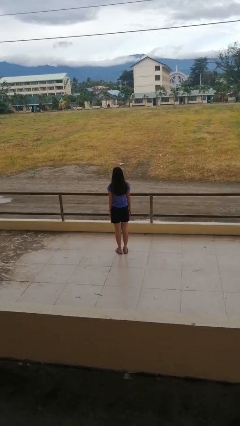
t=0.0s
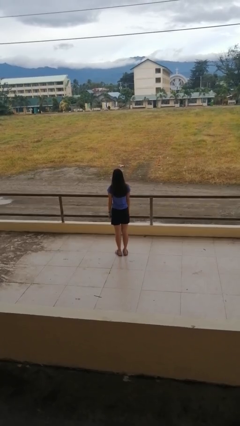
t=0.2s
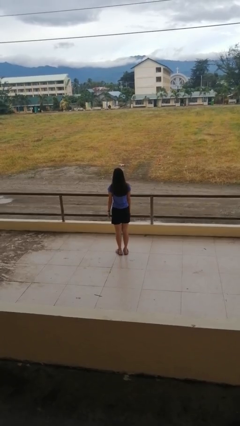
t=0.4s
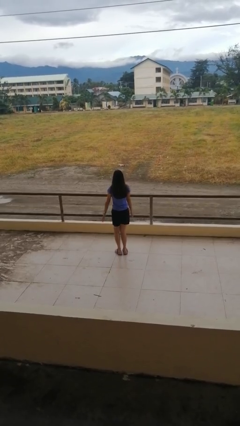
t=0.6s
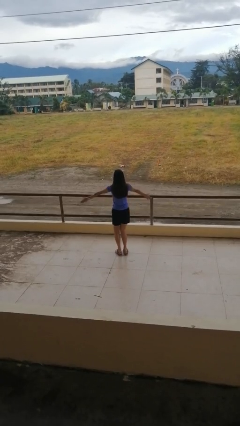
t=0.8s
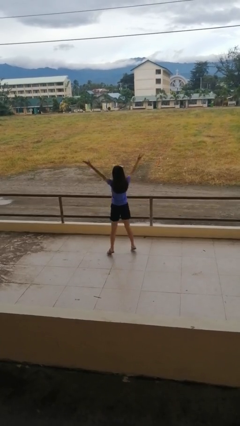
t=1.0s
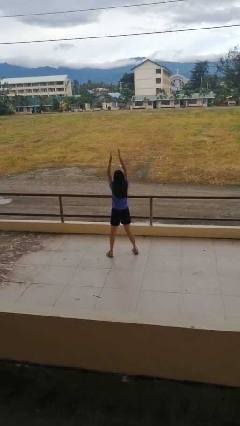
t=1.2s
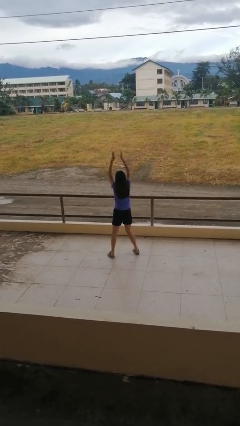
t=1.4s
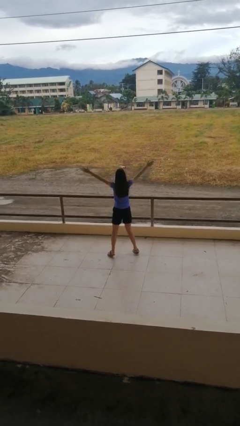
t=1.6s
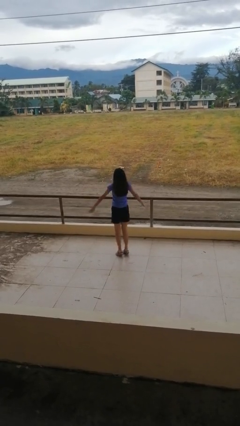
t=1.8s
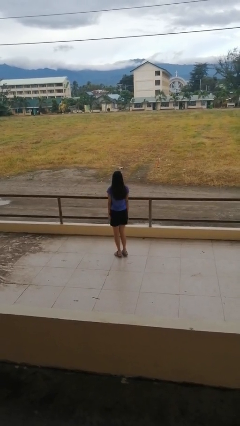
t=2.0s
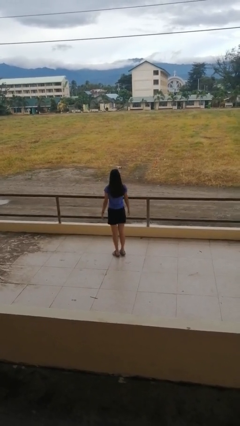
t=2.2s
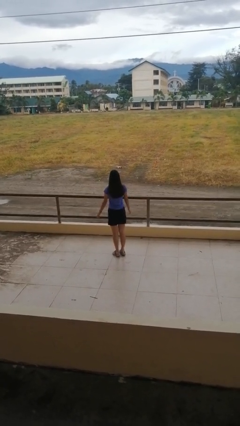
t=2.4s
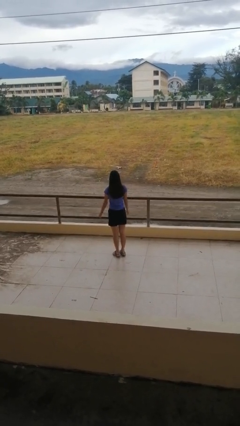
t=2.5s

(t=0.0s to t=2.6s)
person exercises with jumping jacks

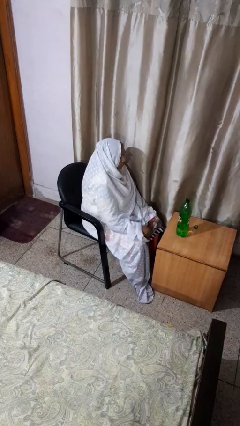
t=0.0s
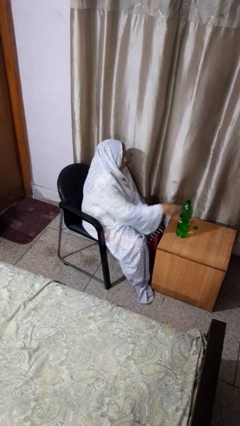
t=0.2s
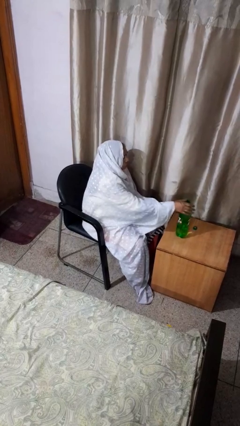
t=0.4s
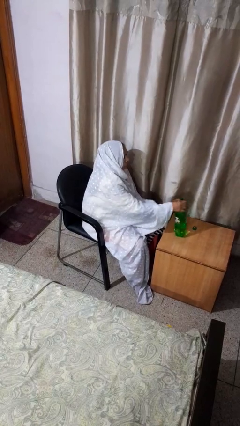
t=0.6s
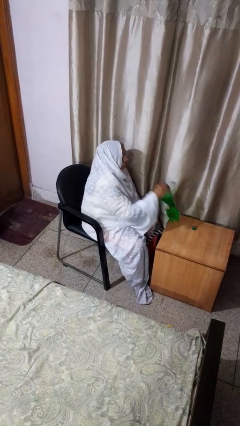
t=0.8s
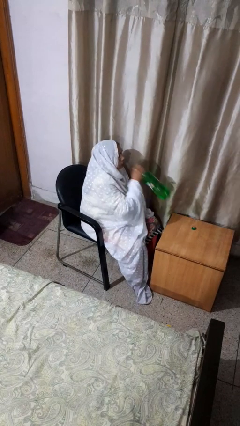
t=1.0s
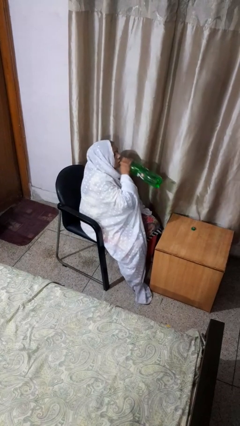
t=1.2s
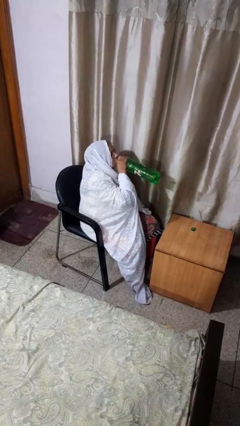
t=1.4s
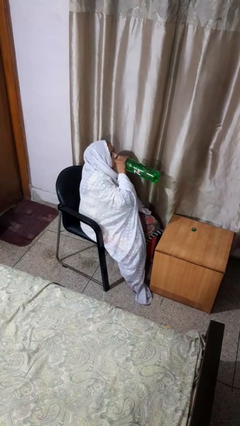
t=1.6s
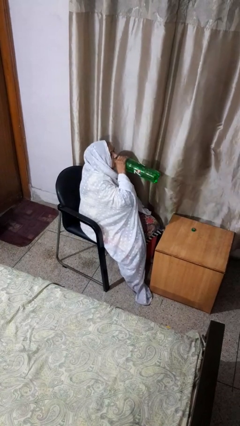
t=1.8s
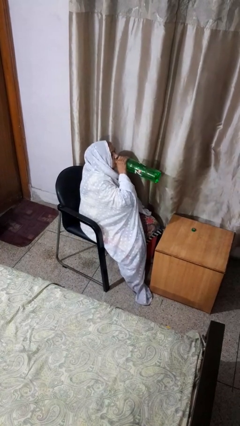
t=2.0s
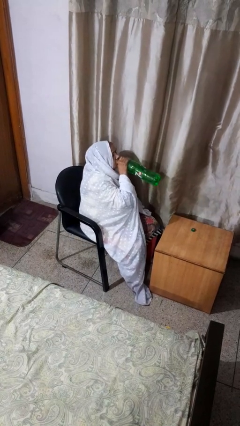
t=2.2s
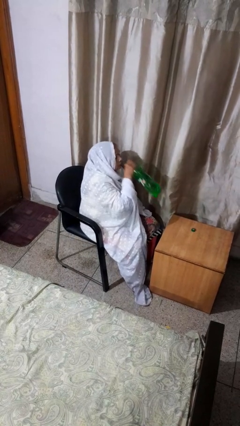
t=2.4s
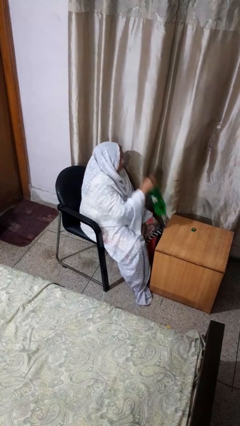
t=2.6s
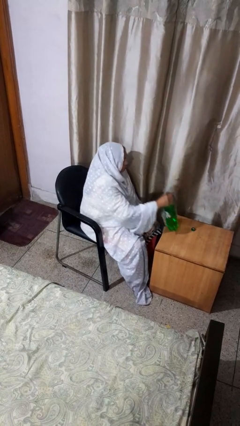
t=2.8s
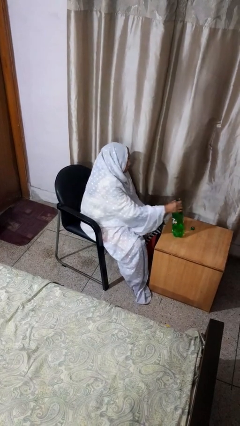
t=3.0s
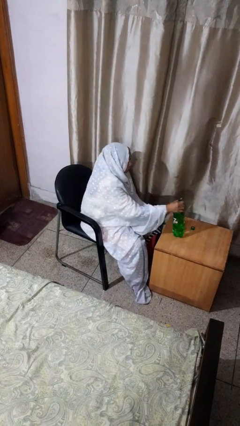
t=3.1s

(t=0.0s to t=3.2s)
person drinks from bottle

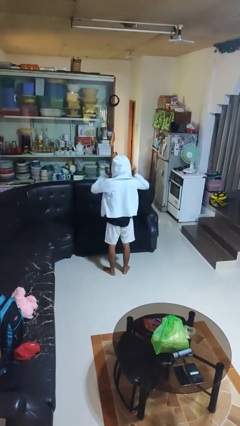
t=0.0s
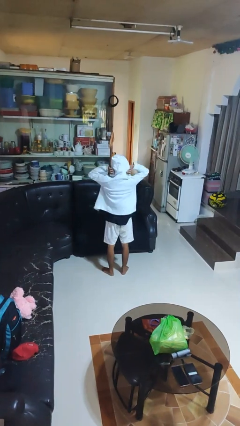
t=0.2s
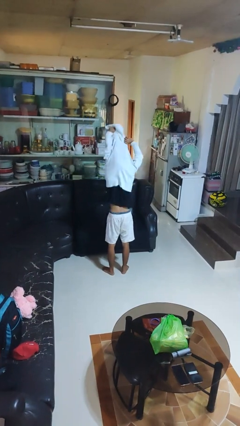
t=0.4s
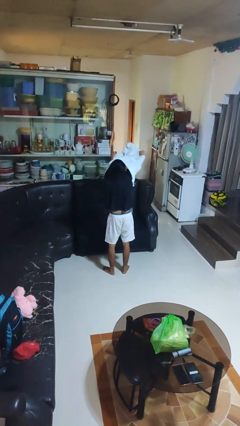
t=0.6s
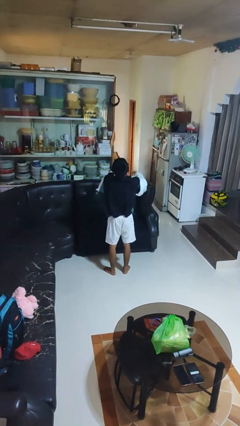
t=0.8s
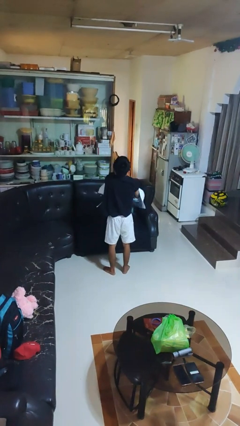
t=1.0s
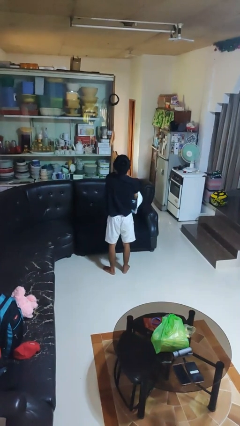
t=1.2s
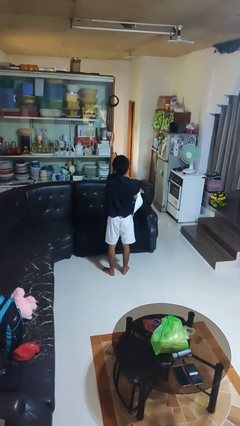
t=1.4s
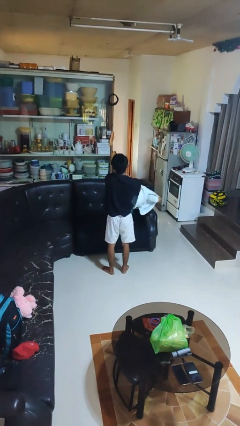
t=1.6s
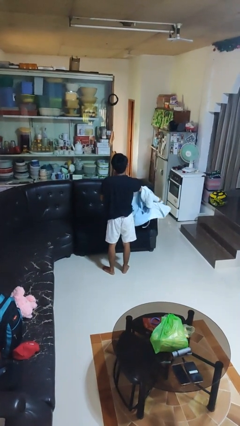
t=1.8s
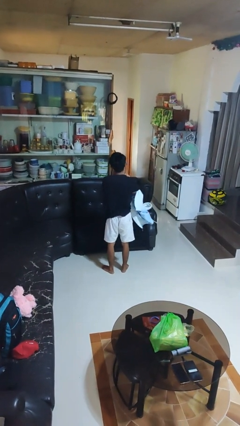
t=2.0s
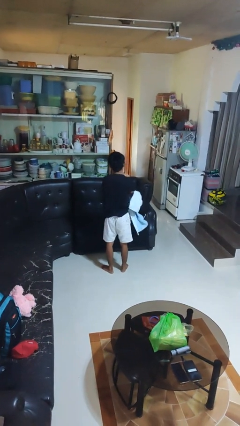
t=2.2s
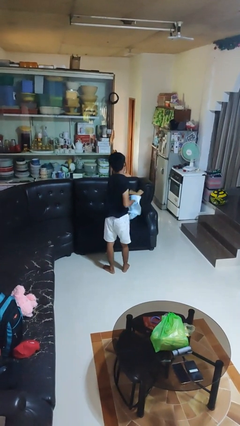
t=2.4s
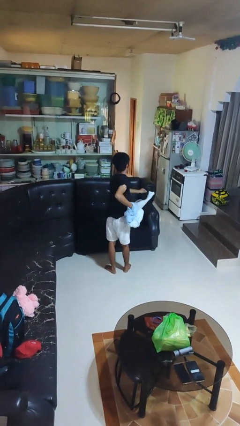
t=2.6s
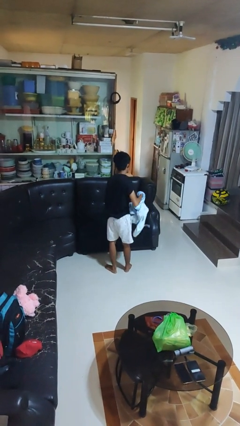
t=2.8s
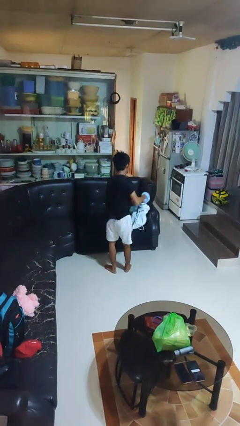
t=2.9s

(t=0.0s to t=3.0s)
person takes off hoodie

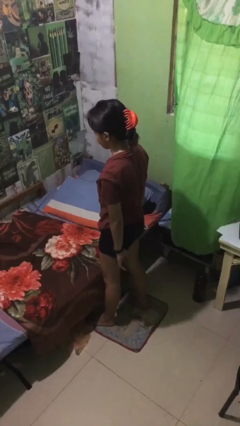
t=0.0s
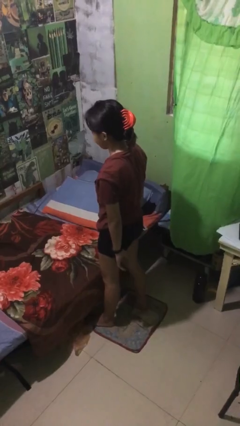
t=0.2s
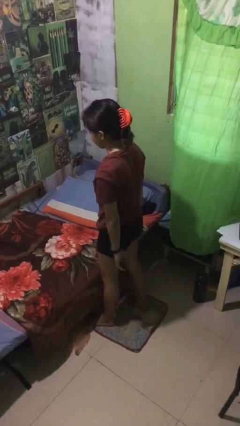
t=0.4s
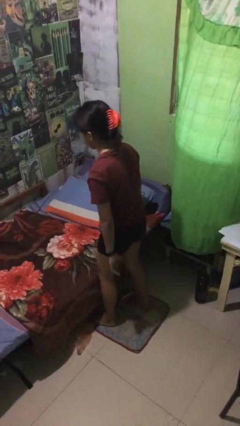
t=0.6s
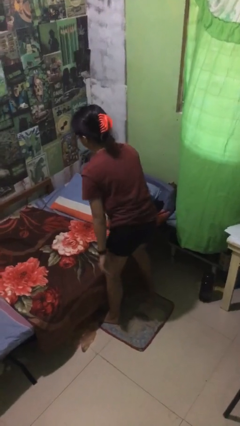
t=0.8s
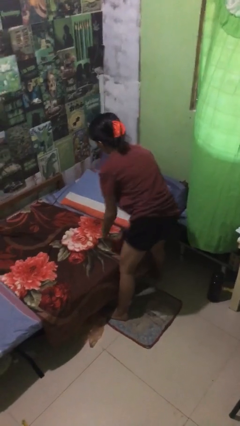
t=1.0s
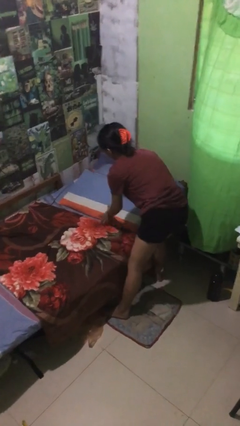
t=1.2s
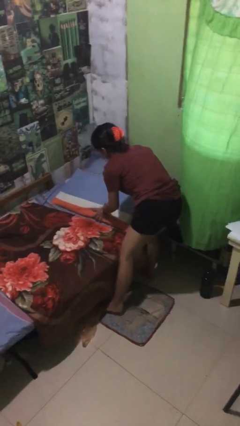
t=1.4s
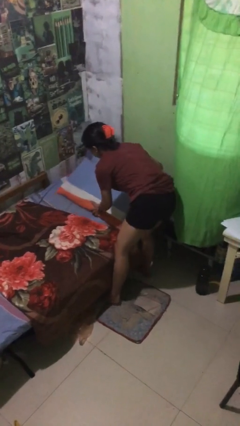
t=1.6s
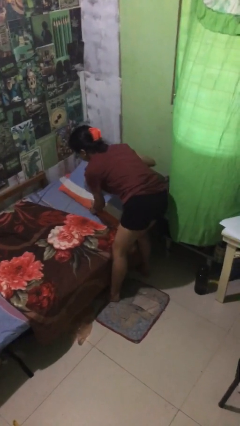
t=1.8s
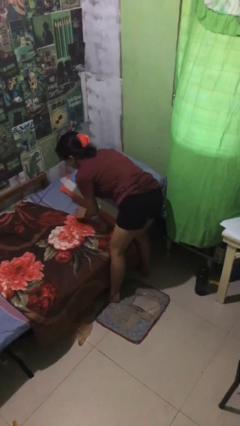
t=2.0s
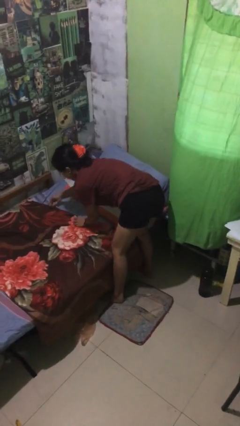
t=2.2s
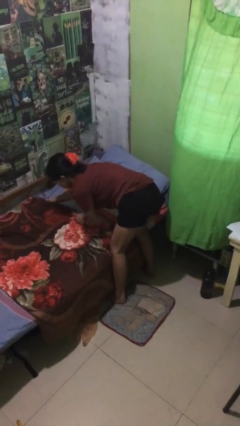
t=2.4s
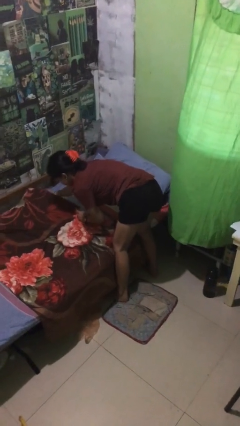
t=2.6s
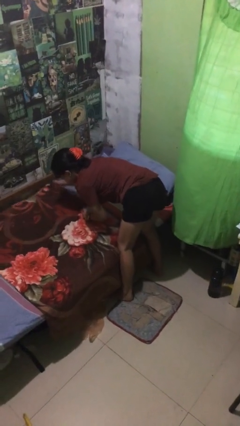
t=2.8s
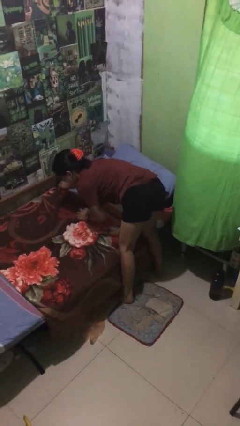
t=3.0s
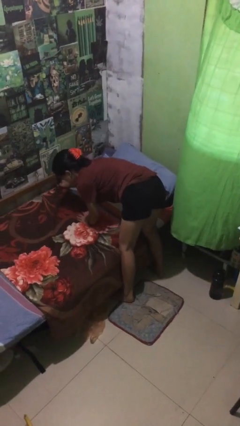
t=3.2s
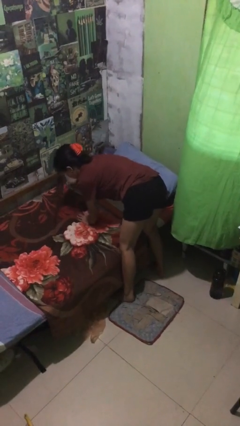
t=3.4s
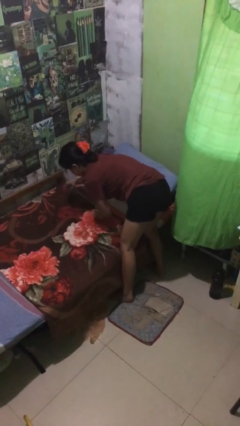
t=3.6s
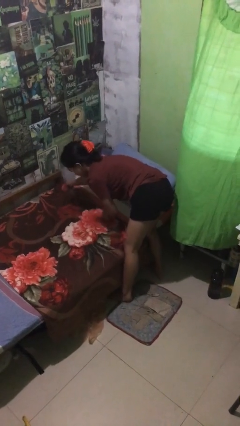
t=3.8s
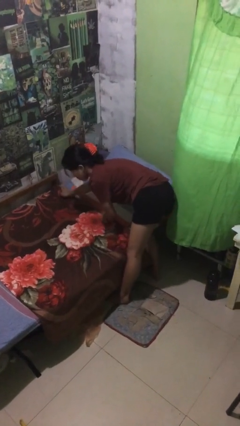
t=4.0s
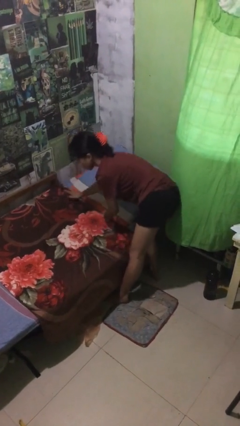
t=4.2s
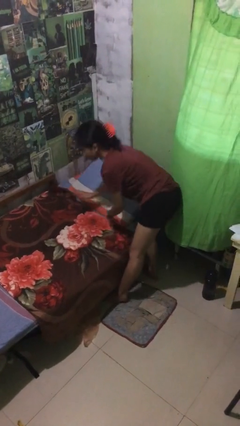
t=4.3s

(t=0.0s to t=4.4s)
person makes bed

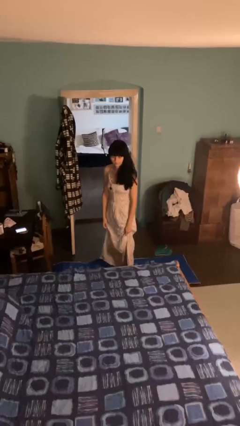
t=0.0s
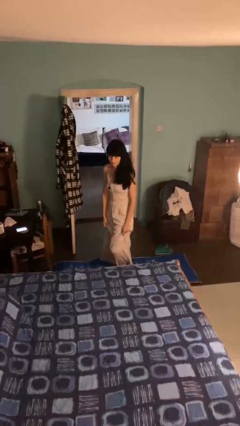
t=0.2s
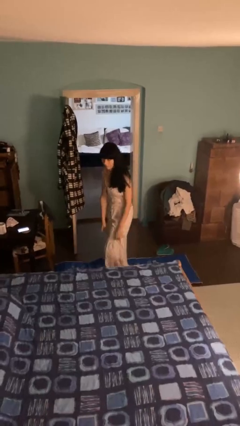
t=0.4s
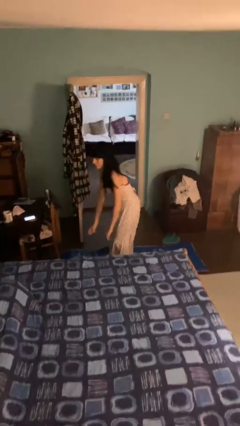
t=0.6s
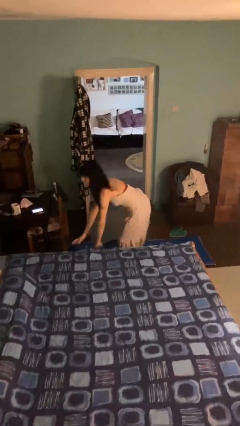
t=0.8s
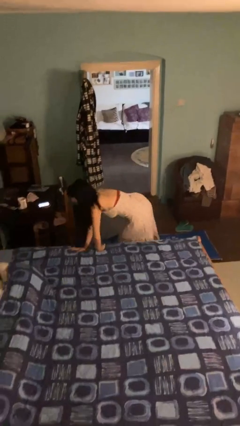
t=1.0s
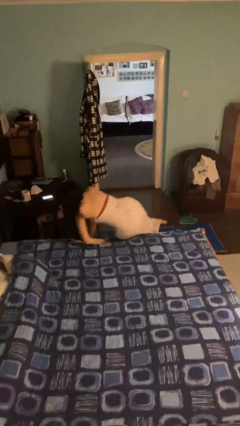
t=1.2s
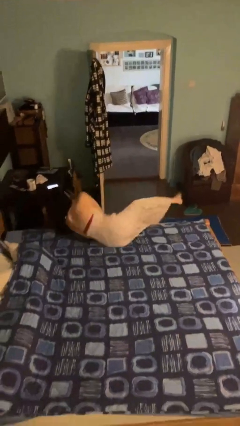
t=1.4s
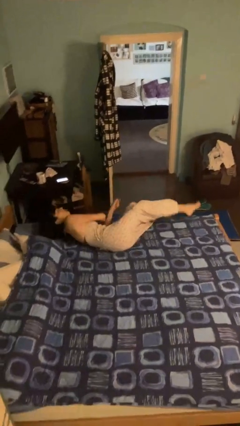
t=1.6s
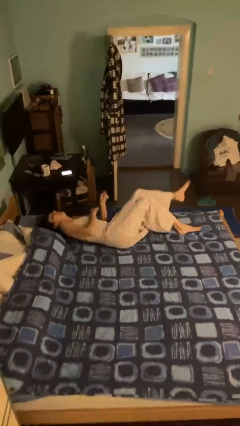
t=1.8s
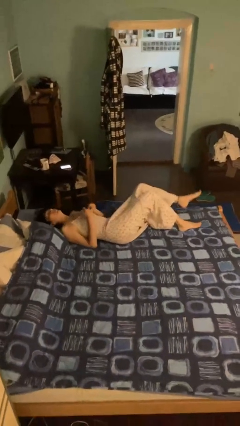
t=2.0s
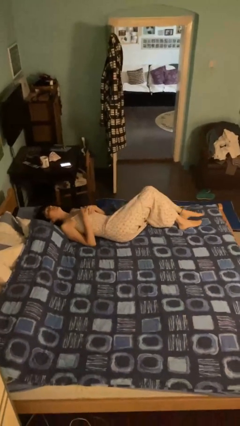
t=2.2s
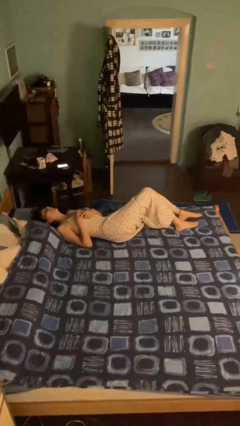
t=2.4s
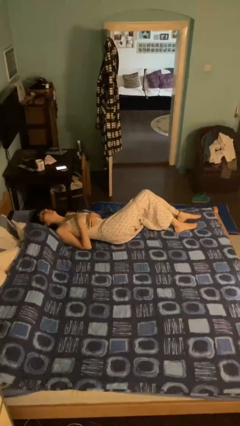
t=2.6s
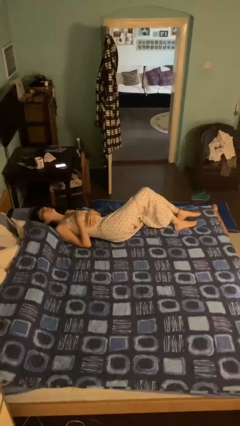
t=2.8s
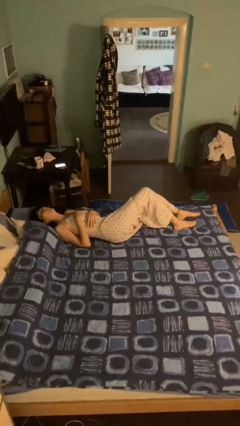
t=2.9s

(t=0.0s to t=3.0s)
person lies down on bed

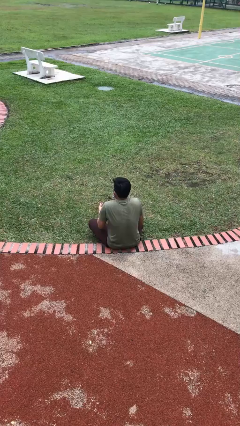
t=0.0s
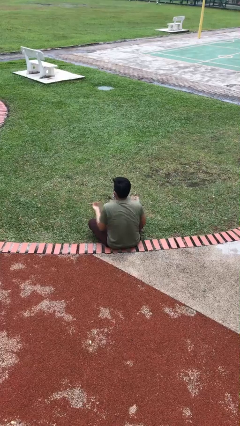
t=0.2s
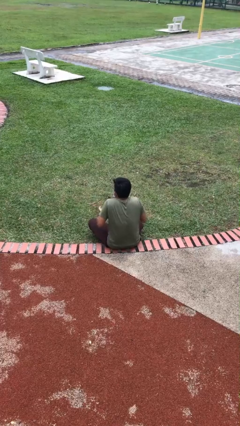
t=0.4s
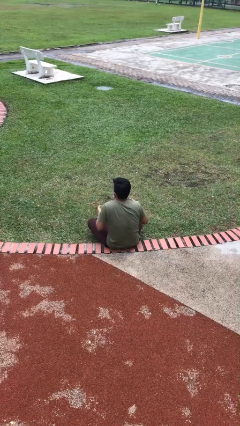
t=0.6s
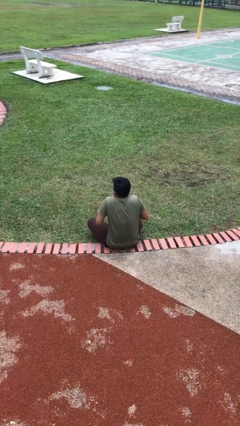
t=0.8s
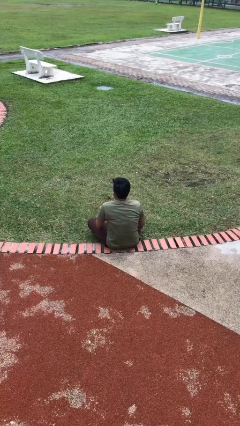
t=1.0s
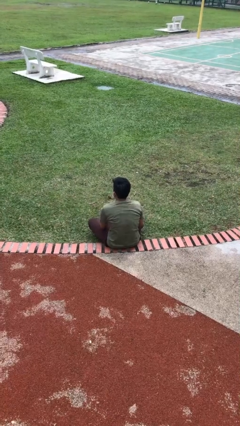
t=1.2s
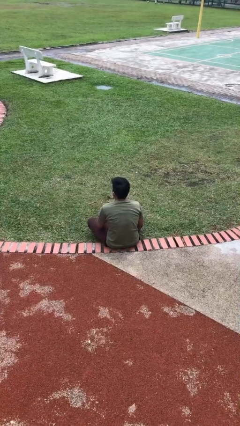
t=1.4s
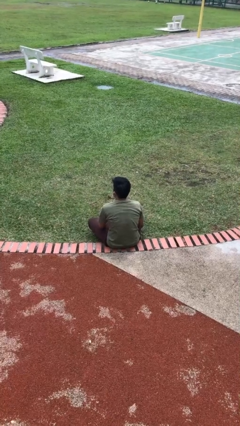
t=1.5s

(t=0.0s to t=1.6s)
person shrugs
